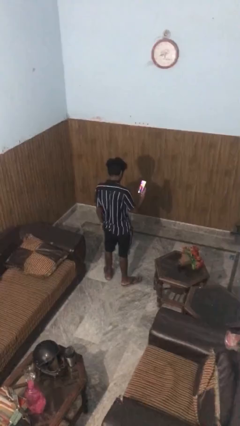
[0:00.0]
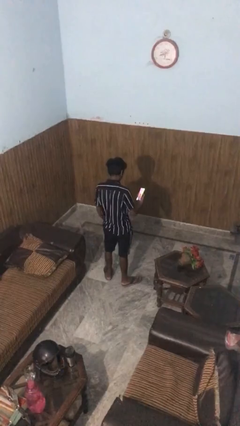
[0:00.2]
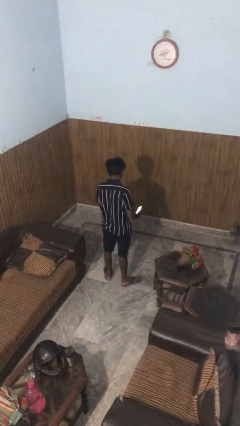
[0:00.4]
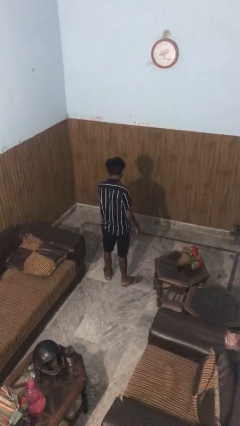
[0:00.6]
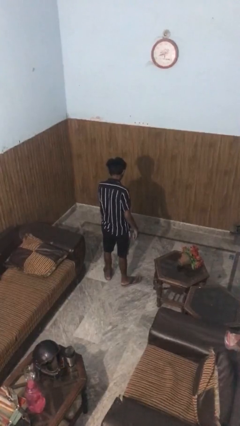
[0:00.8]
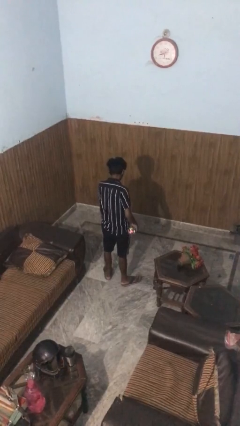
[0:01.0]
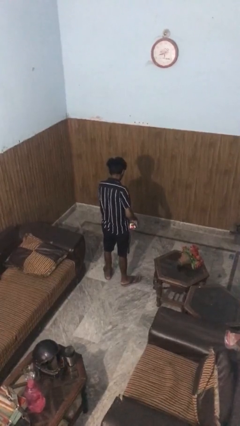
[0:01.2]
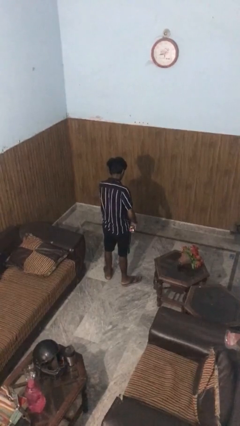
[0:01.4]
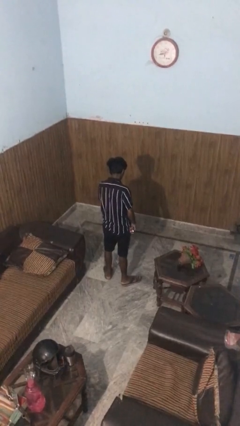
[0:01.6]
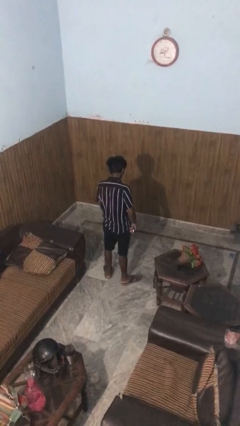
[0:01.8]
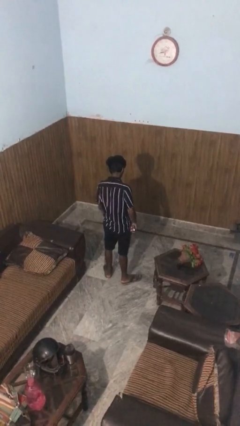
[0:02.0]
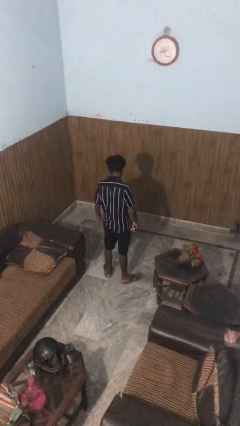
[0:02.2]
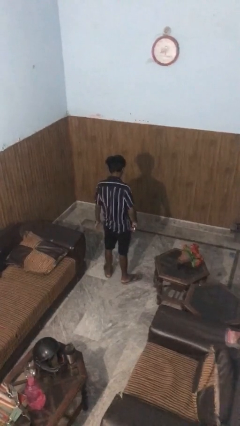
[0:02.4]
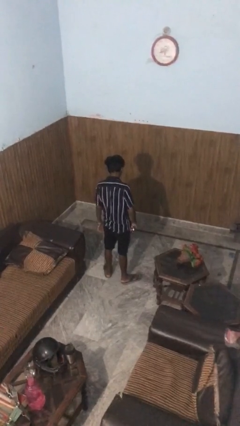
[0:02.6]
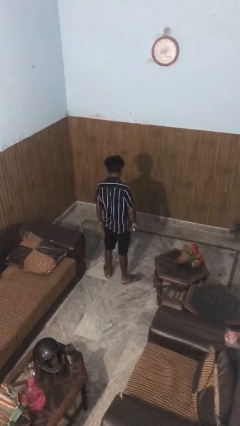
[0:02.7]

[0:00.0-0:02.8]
person puts phone into pocket

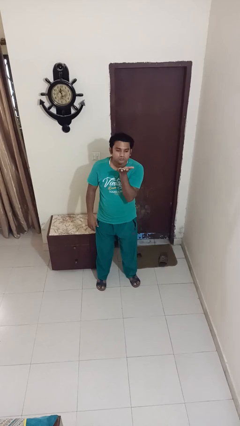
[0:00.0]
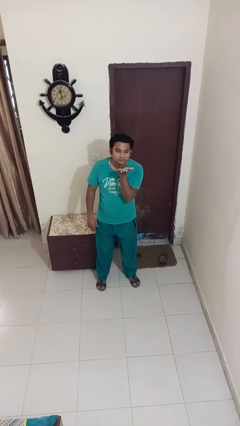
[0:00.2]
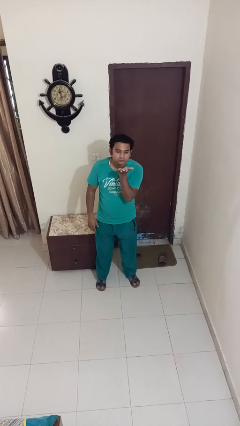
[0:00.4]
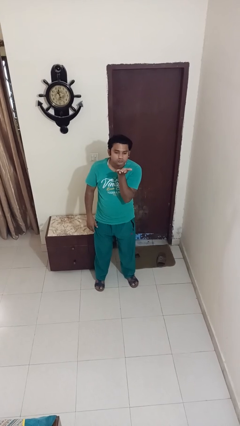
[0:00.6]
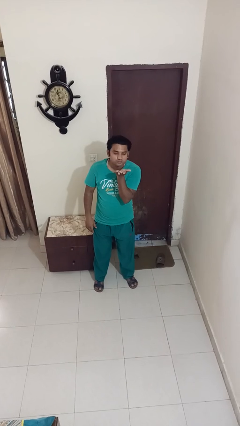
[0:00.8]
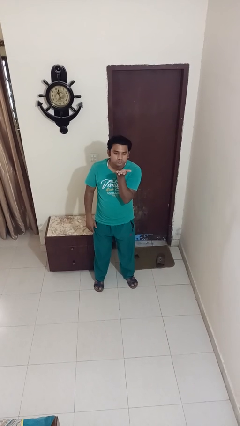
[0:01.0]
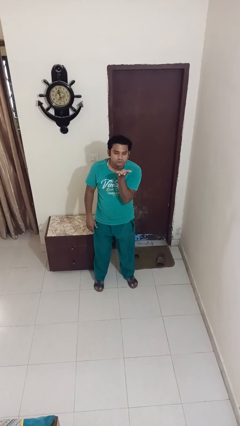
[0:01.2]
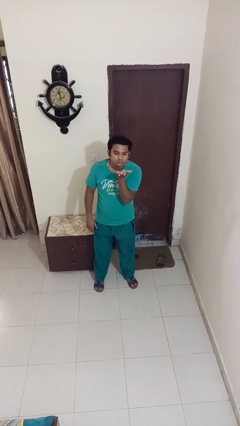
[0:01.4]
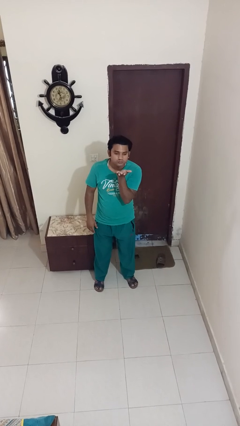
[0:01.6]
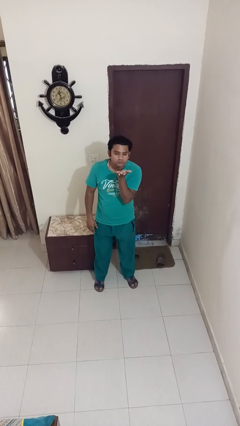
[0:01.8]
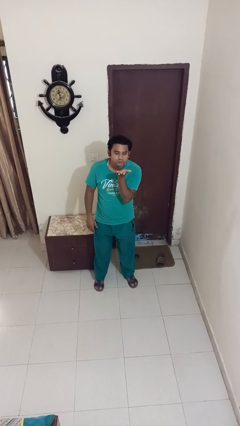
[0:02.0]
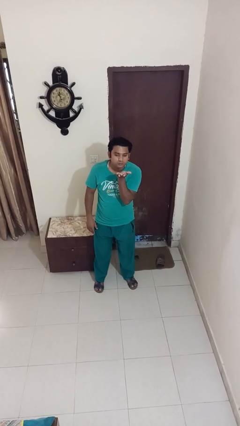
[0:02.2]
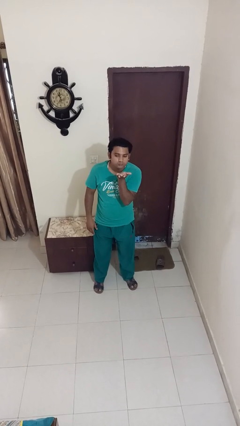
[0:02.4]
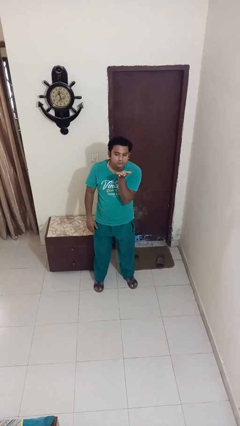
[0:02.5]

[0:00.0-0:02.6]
person gestures blow kiss

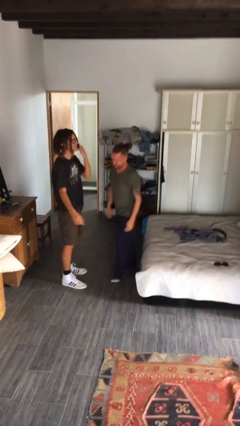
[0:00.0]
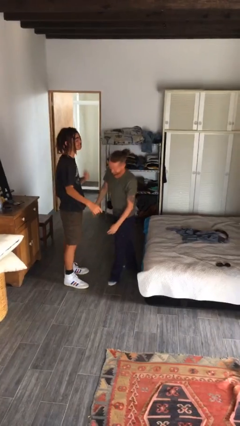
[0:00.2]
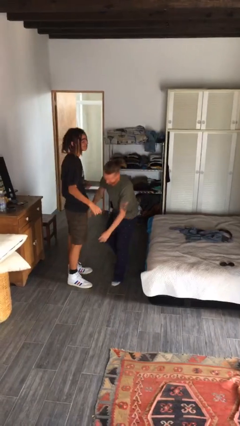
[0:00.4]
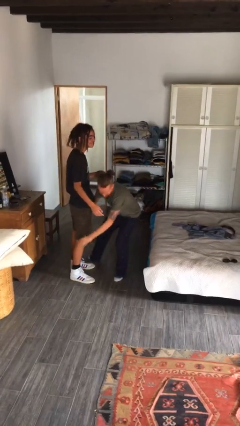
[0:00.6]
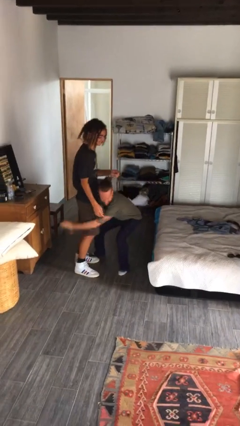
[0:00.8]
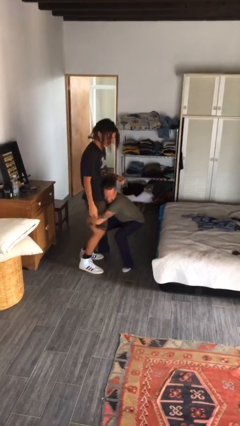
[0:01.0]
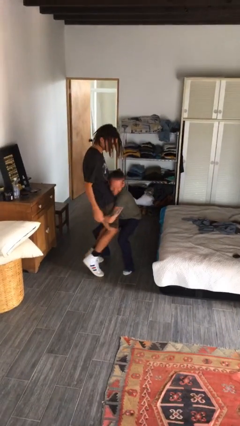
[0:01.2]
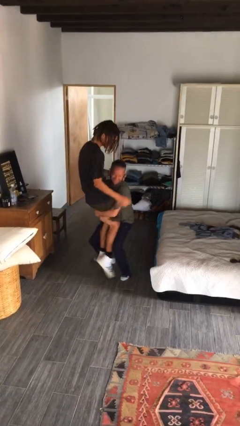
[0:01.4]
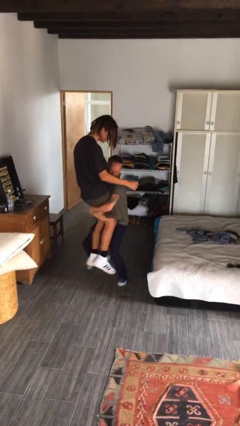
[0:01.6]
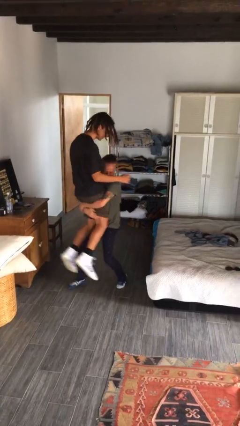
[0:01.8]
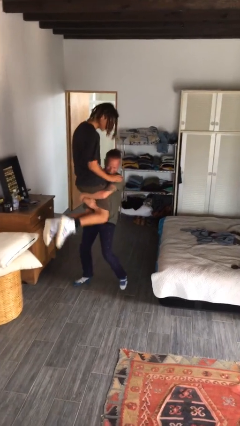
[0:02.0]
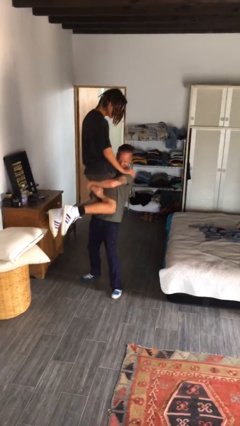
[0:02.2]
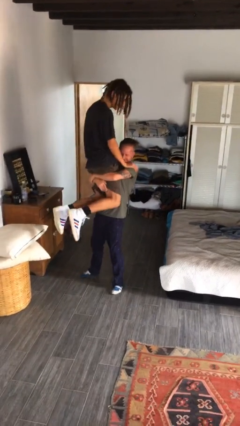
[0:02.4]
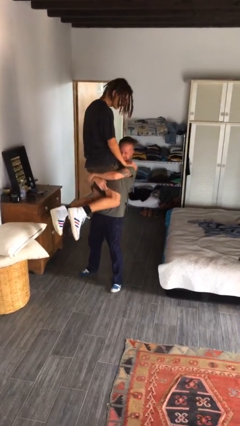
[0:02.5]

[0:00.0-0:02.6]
person picks up person

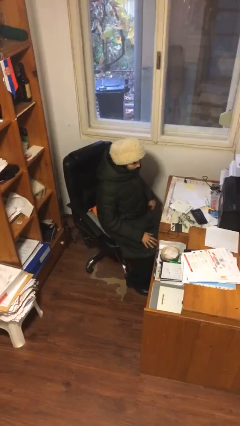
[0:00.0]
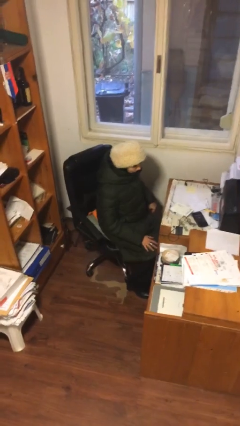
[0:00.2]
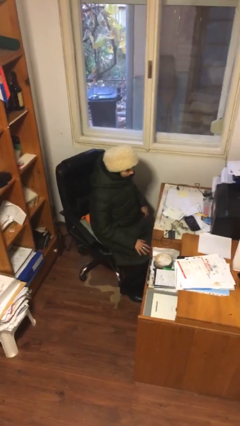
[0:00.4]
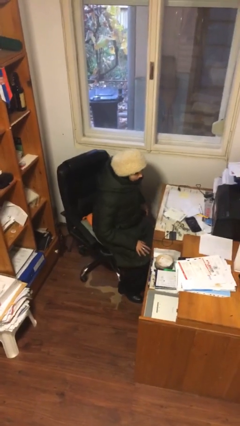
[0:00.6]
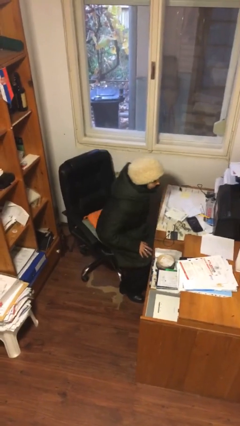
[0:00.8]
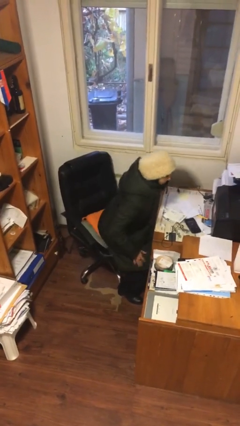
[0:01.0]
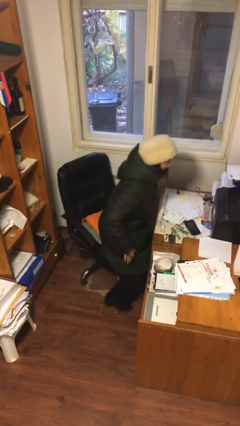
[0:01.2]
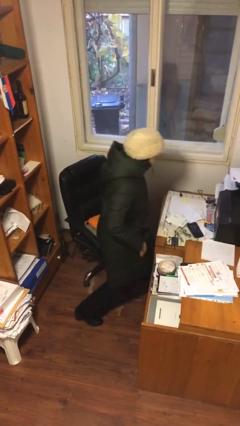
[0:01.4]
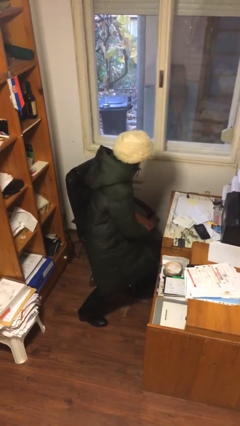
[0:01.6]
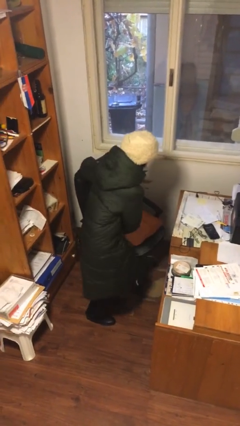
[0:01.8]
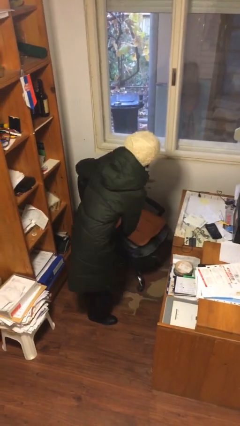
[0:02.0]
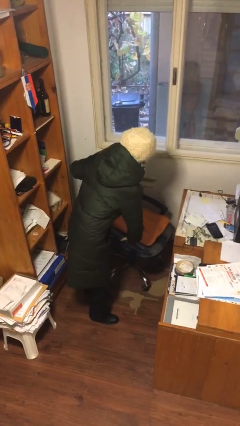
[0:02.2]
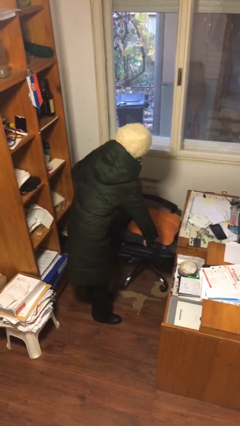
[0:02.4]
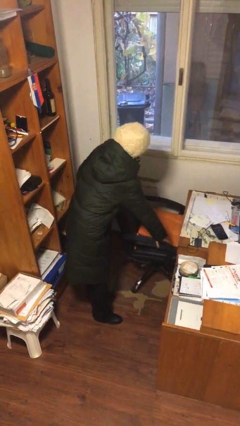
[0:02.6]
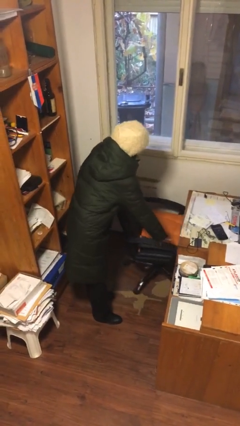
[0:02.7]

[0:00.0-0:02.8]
person stands up

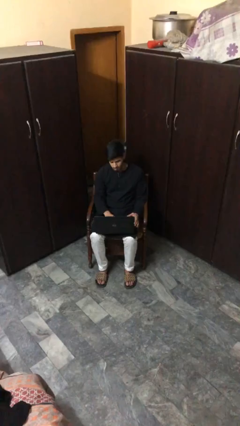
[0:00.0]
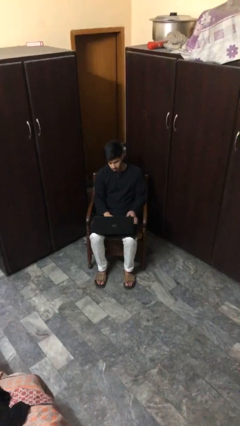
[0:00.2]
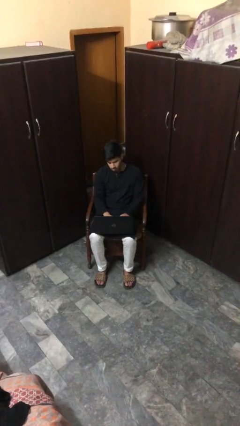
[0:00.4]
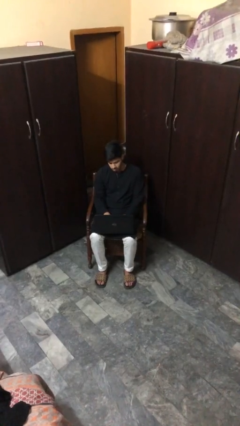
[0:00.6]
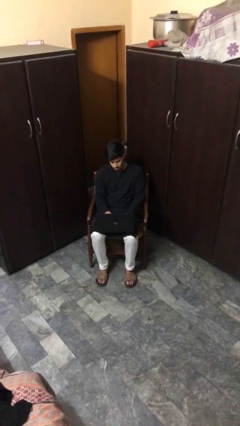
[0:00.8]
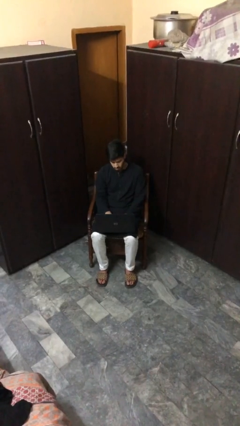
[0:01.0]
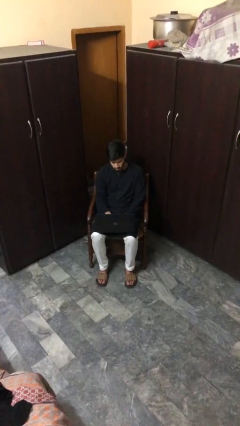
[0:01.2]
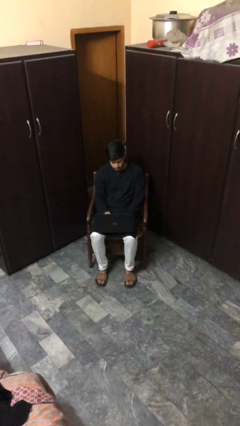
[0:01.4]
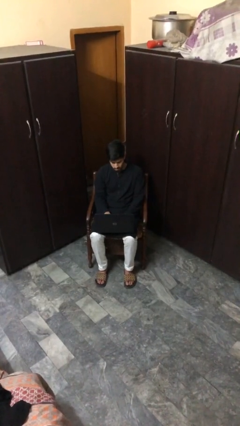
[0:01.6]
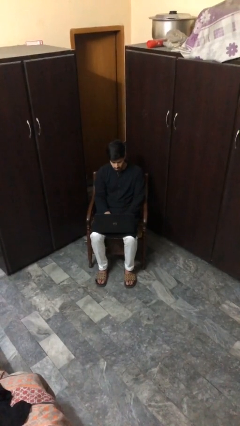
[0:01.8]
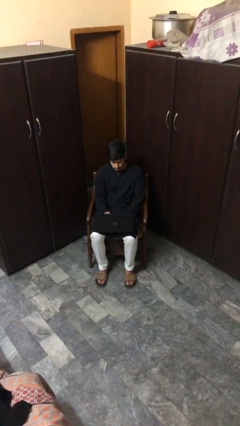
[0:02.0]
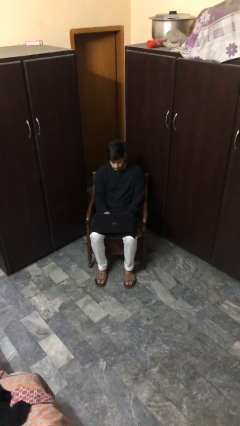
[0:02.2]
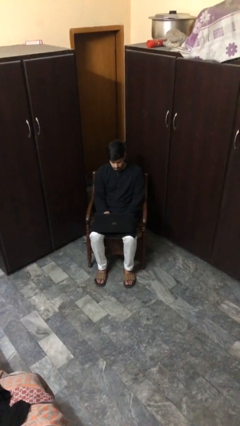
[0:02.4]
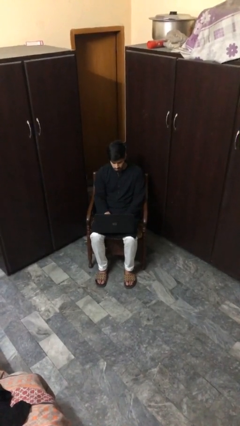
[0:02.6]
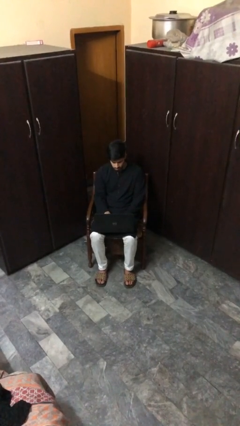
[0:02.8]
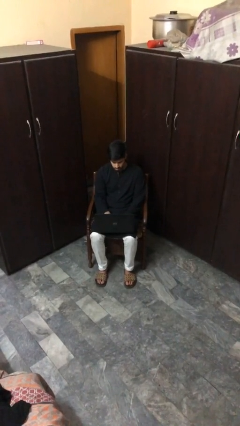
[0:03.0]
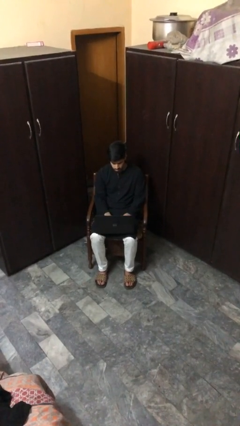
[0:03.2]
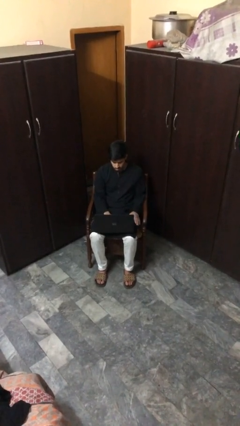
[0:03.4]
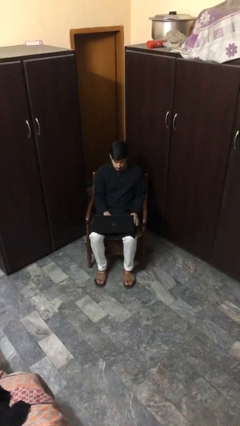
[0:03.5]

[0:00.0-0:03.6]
person interacts with laptop

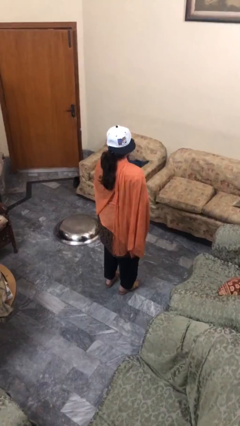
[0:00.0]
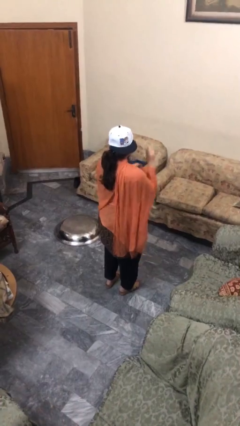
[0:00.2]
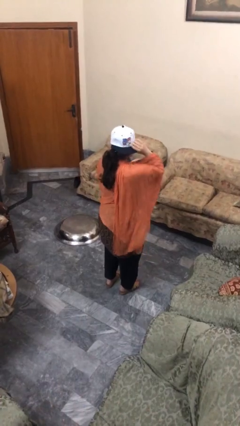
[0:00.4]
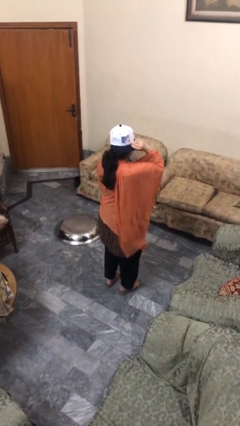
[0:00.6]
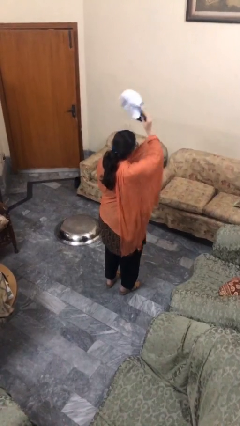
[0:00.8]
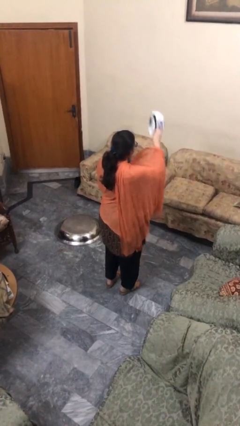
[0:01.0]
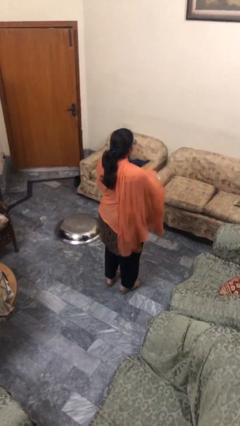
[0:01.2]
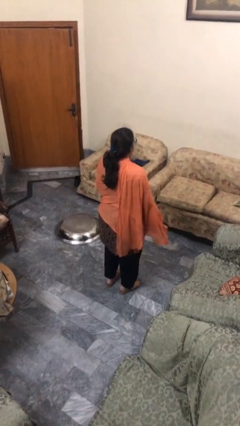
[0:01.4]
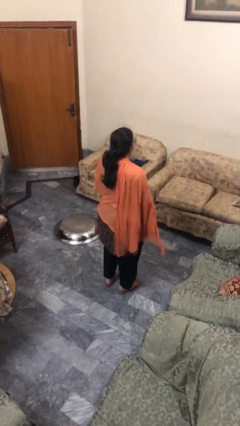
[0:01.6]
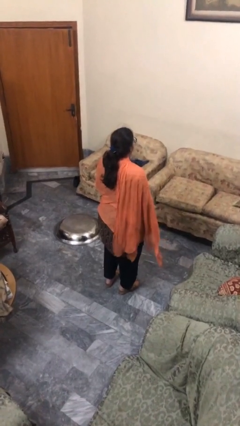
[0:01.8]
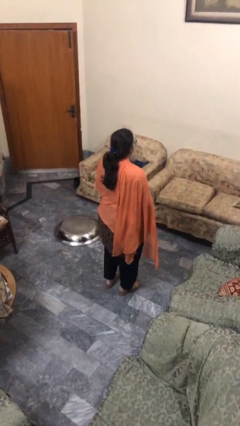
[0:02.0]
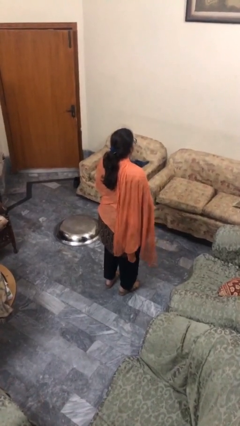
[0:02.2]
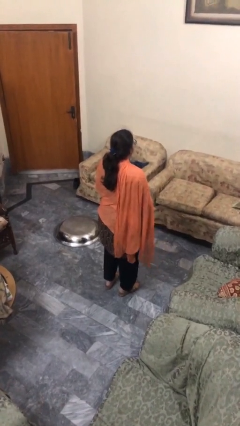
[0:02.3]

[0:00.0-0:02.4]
person takes off hat

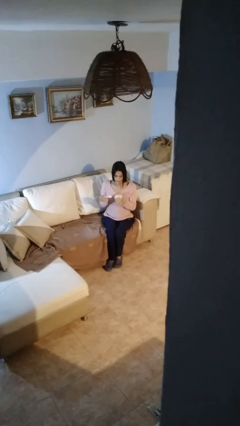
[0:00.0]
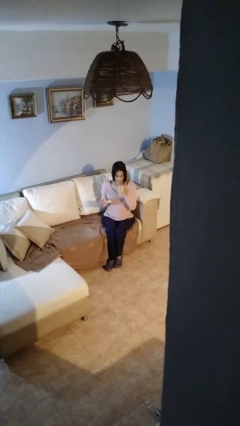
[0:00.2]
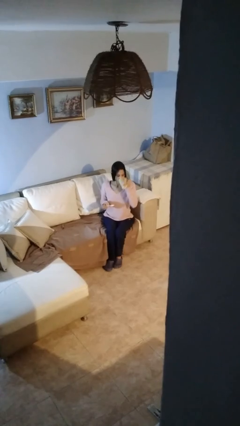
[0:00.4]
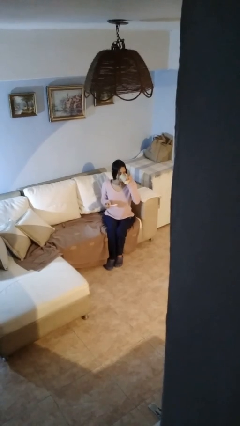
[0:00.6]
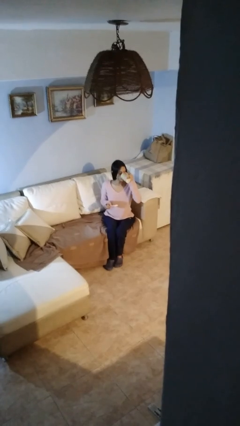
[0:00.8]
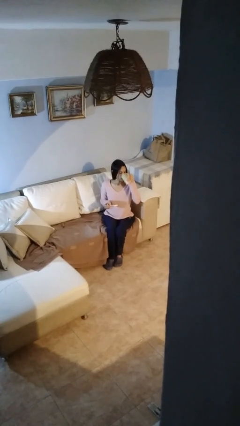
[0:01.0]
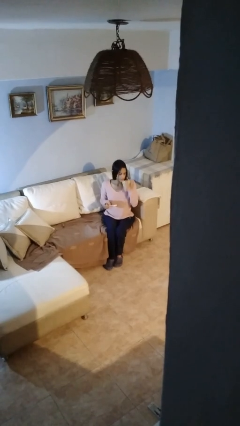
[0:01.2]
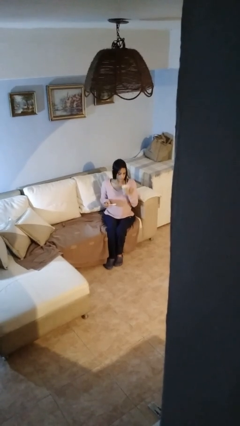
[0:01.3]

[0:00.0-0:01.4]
person drinks from mug
